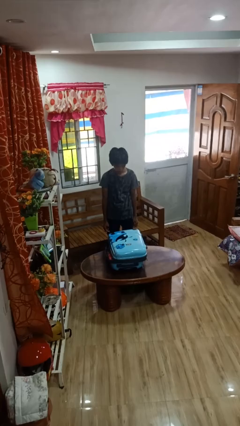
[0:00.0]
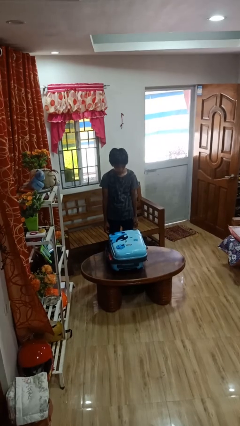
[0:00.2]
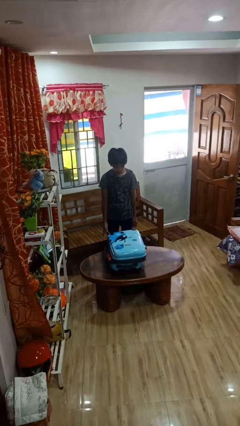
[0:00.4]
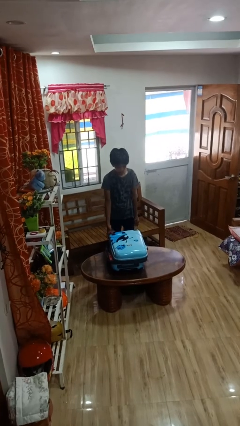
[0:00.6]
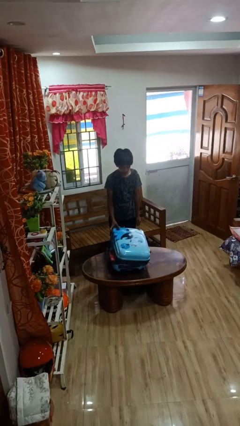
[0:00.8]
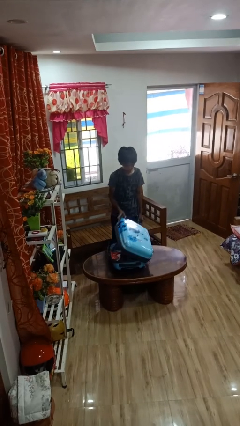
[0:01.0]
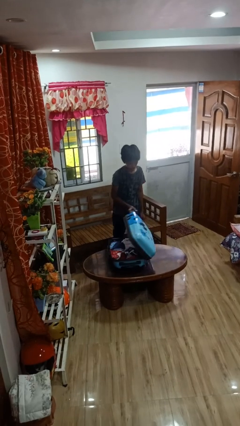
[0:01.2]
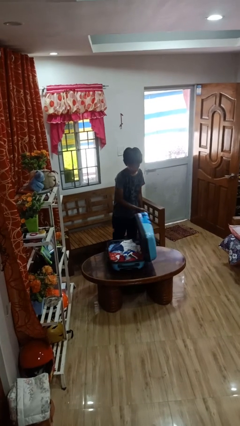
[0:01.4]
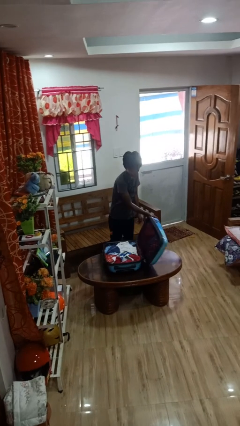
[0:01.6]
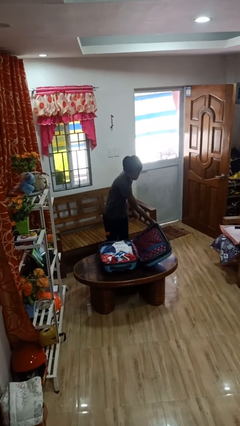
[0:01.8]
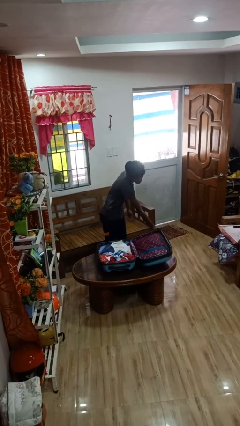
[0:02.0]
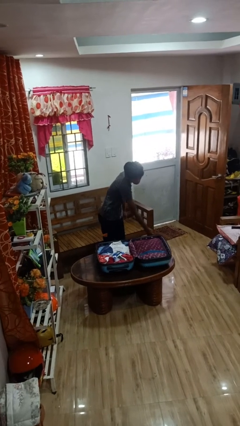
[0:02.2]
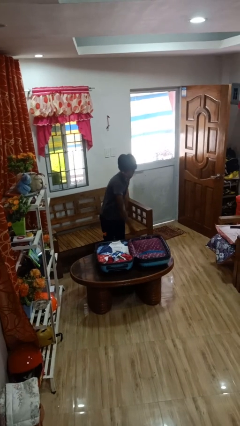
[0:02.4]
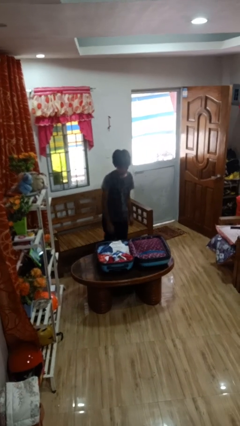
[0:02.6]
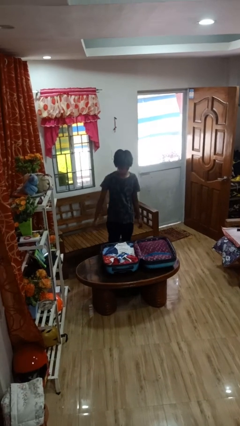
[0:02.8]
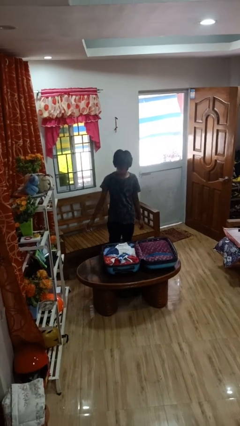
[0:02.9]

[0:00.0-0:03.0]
person opens suitcase

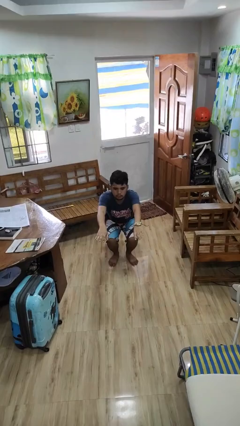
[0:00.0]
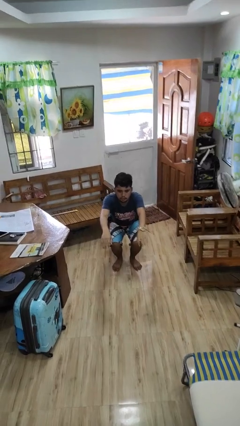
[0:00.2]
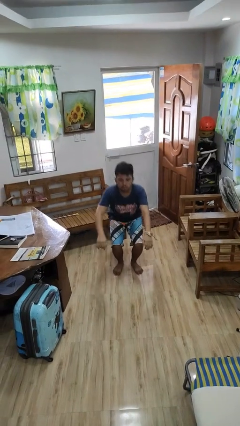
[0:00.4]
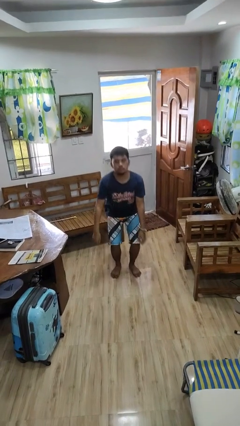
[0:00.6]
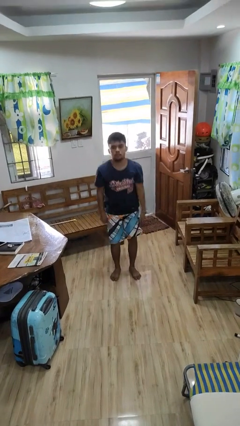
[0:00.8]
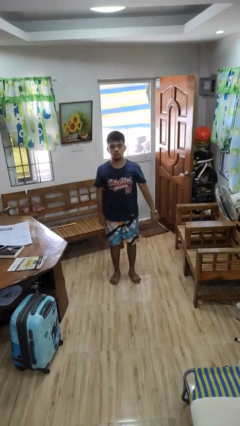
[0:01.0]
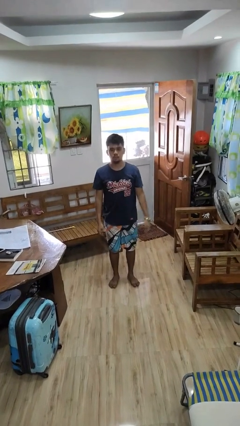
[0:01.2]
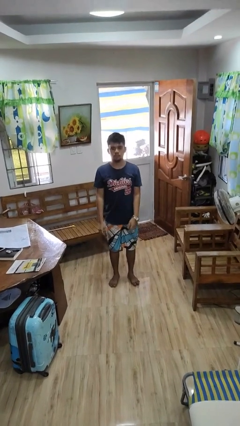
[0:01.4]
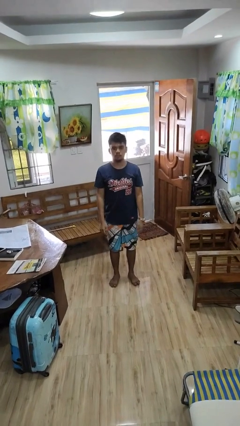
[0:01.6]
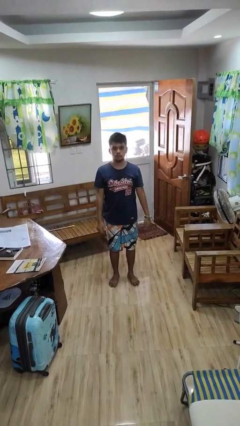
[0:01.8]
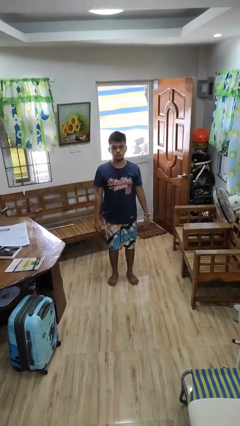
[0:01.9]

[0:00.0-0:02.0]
person stands up

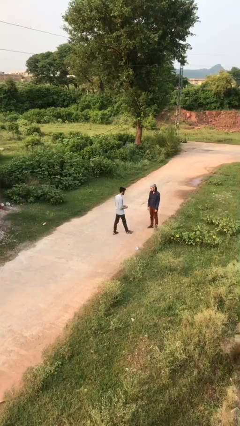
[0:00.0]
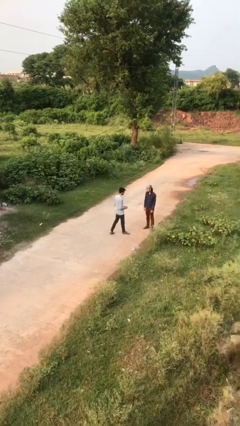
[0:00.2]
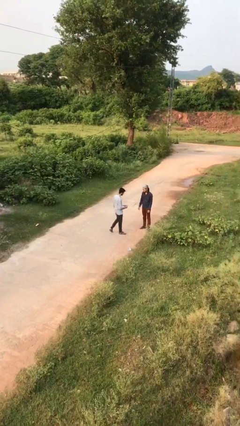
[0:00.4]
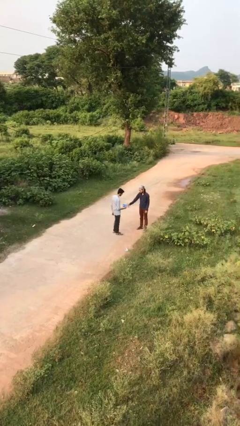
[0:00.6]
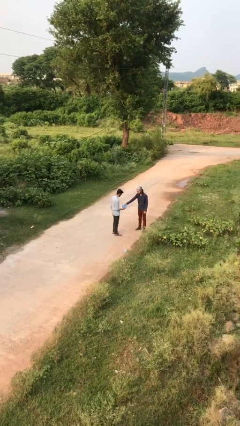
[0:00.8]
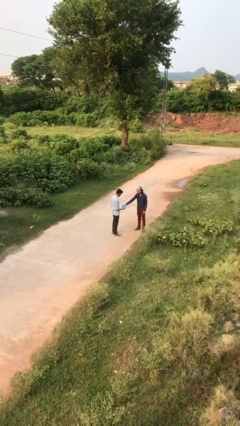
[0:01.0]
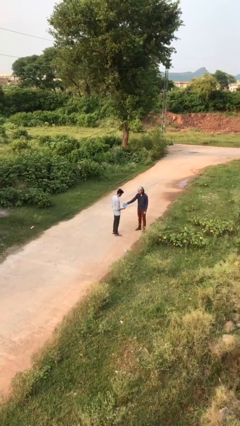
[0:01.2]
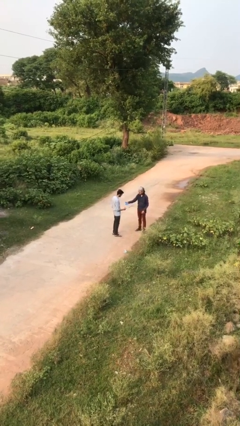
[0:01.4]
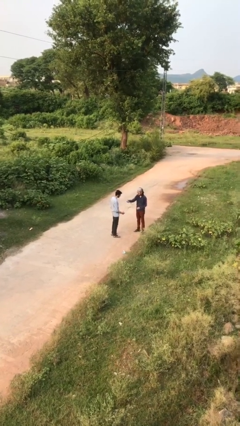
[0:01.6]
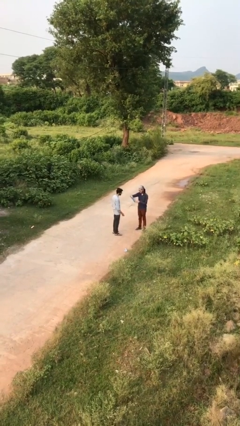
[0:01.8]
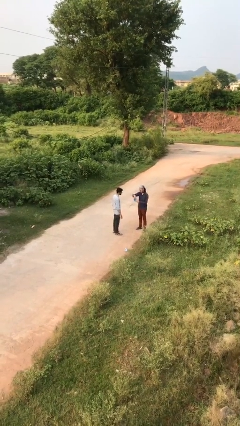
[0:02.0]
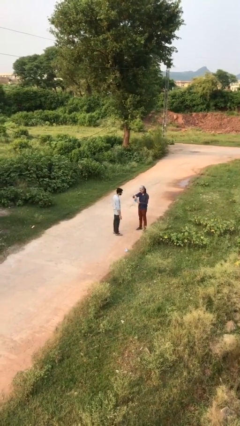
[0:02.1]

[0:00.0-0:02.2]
person transfers object to person

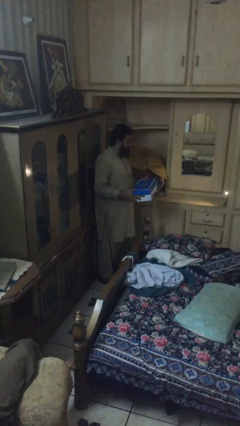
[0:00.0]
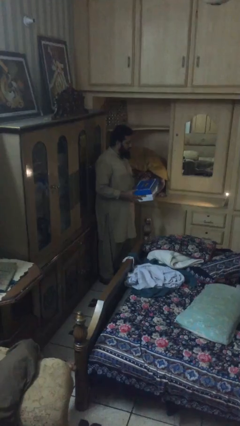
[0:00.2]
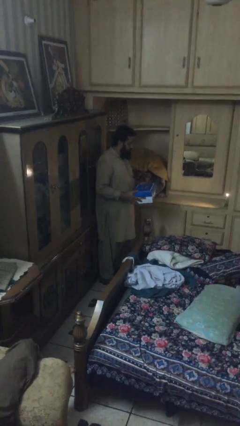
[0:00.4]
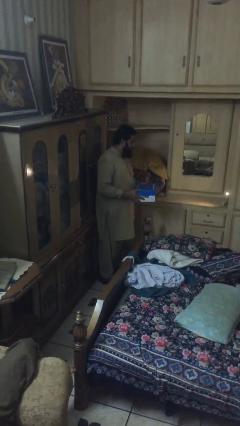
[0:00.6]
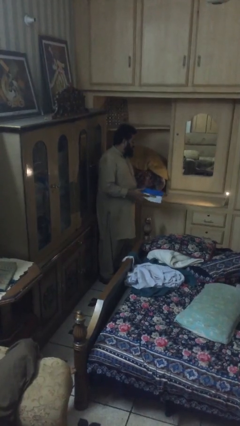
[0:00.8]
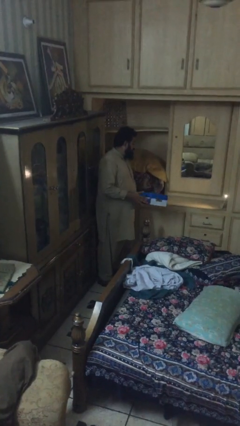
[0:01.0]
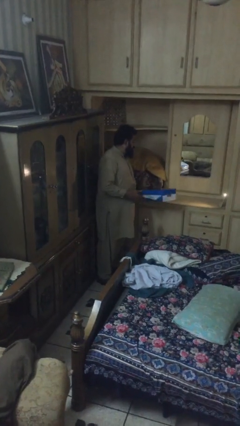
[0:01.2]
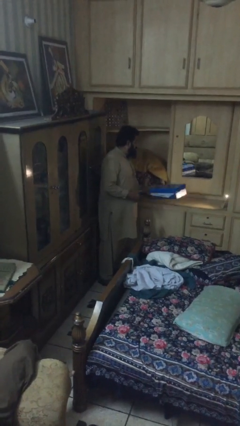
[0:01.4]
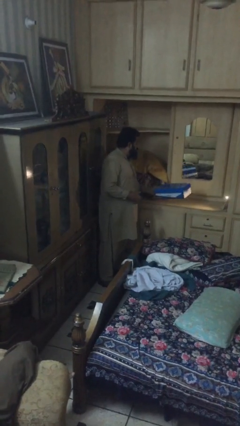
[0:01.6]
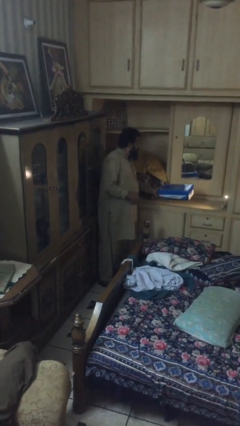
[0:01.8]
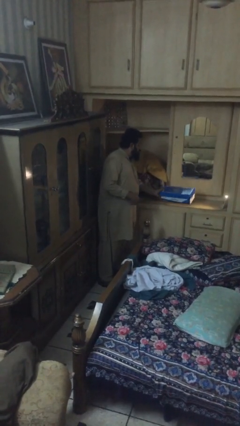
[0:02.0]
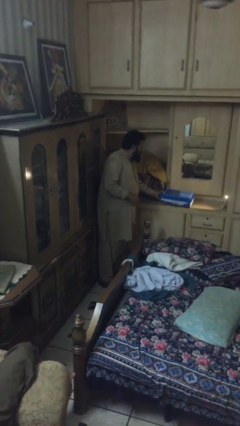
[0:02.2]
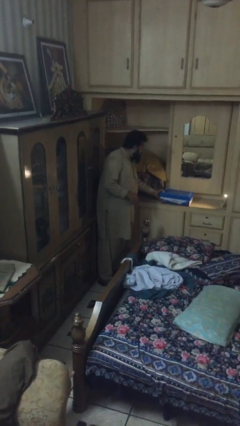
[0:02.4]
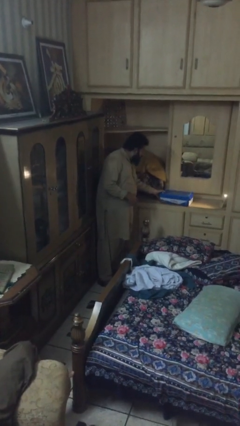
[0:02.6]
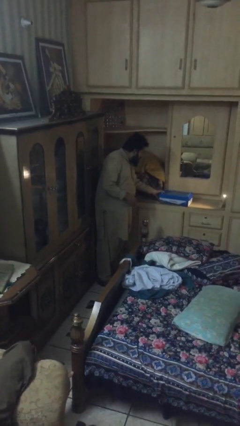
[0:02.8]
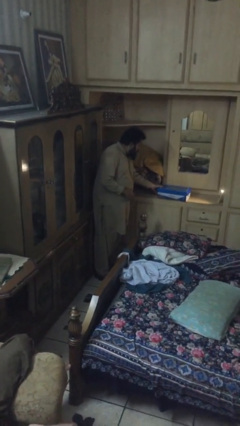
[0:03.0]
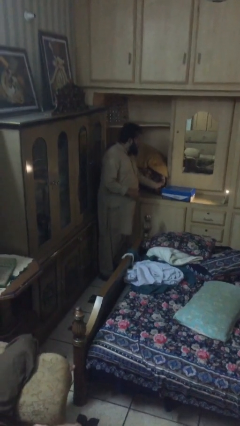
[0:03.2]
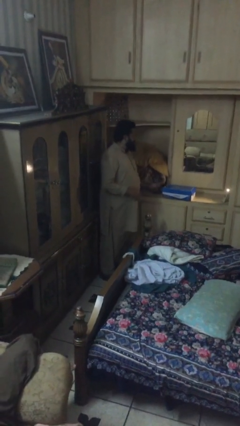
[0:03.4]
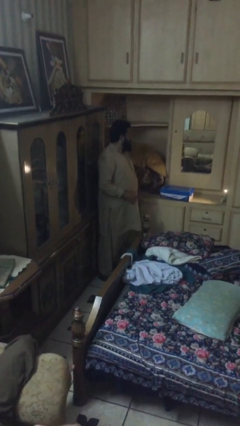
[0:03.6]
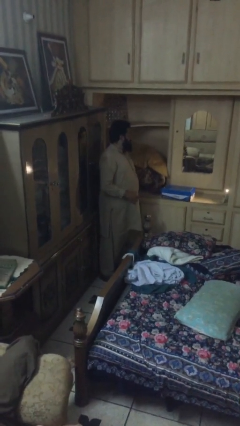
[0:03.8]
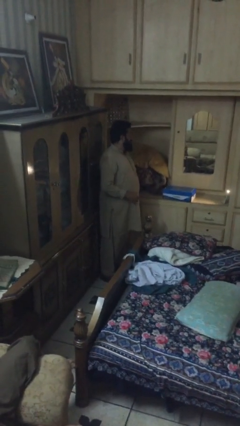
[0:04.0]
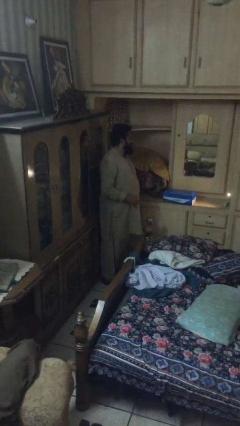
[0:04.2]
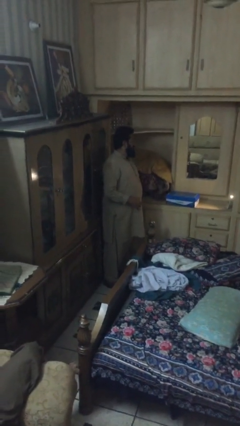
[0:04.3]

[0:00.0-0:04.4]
person puts down object on table

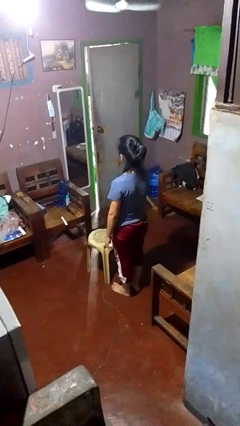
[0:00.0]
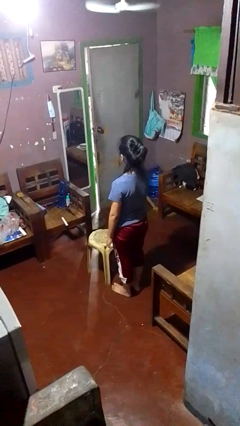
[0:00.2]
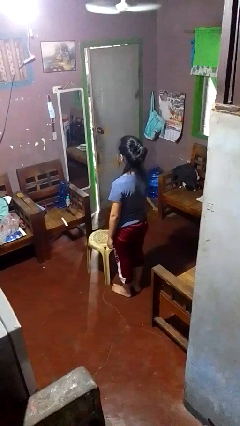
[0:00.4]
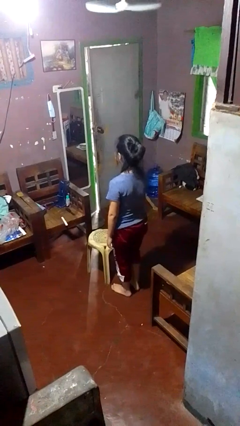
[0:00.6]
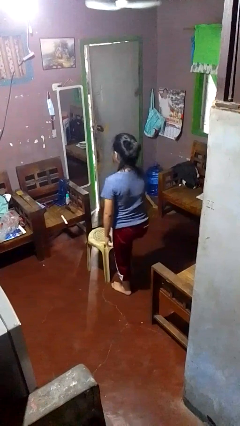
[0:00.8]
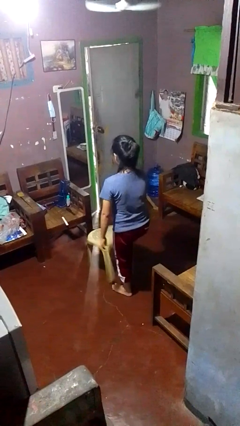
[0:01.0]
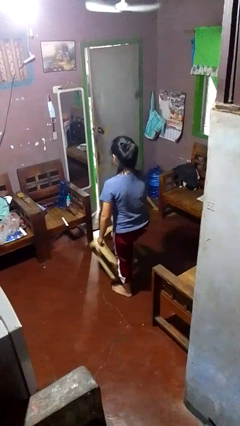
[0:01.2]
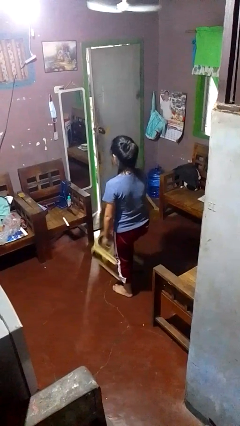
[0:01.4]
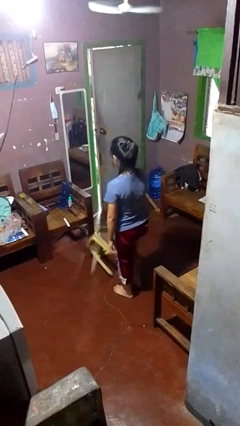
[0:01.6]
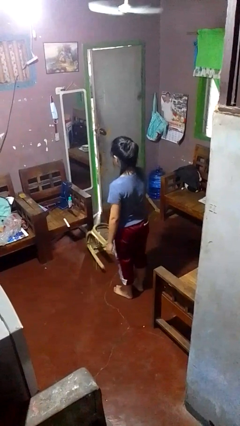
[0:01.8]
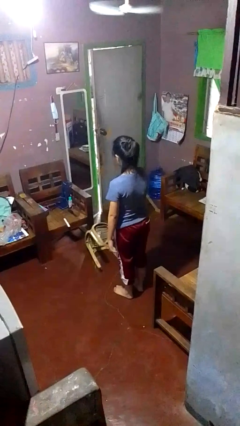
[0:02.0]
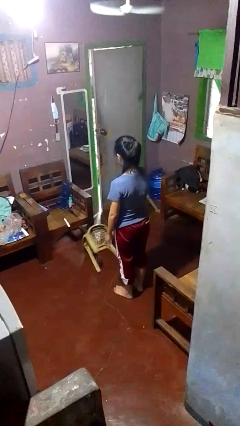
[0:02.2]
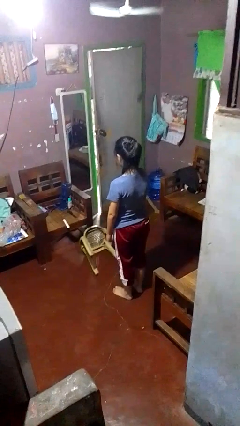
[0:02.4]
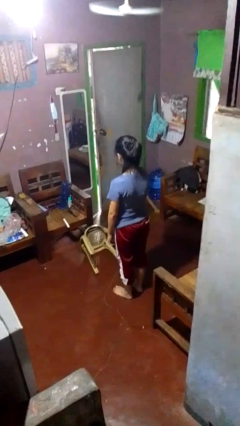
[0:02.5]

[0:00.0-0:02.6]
person knocks over furniture

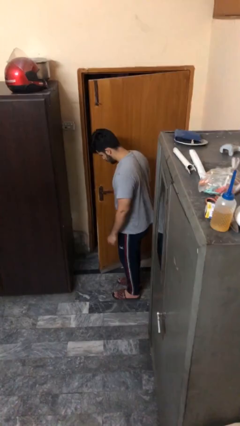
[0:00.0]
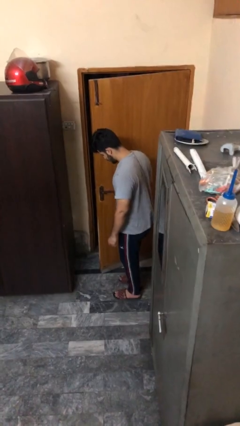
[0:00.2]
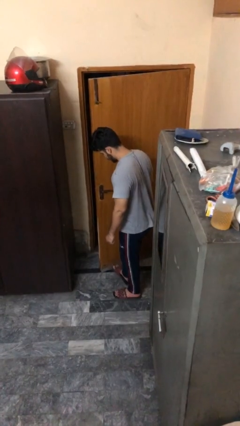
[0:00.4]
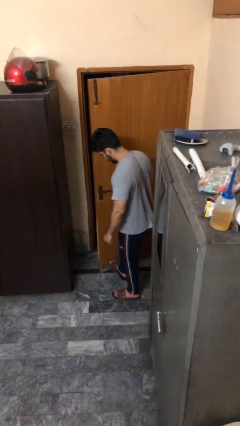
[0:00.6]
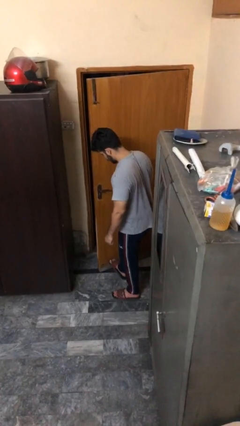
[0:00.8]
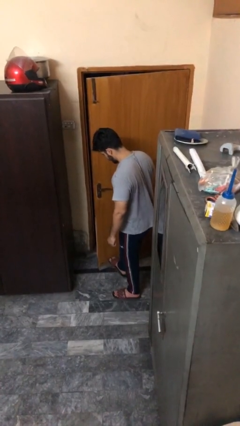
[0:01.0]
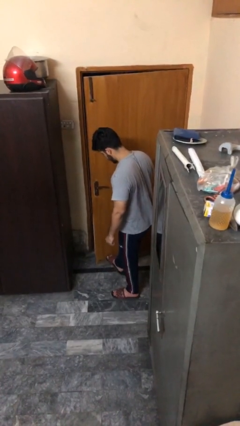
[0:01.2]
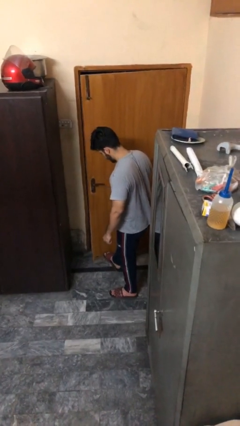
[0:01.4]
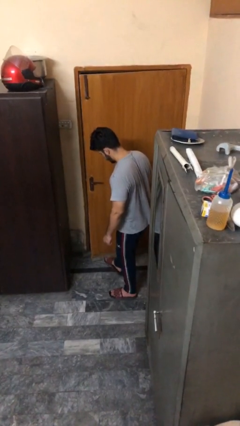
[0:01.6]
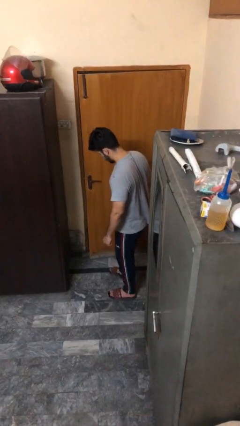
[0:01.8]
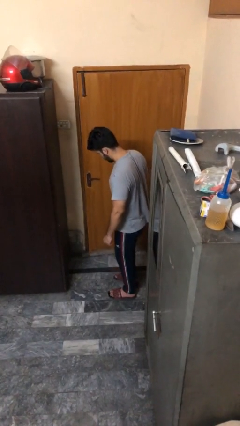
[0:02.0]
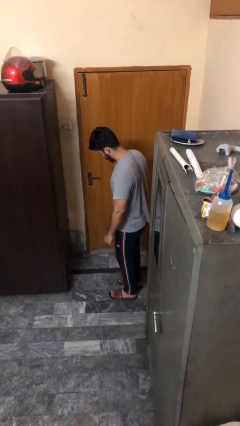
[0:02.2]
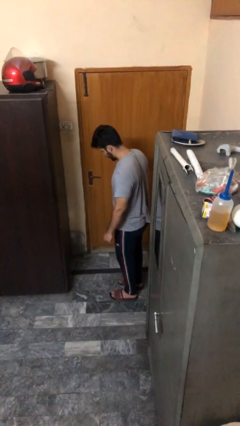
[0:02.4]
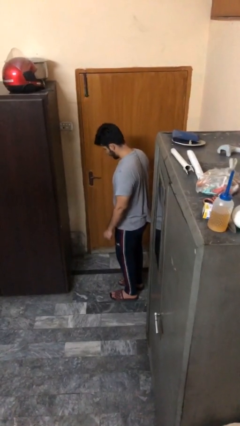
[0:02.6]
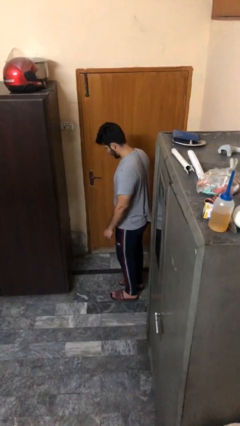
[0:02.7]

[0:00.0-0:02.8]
person closes door with foot
